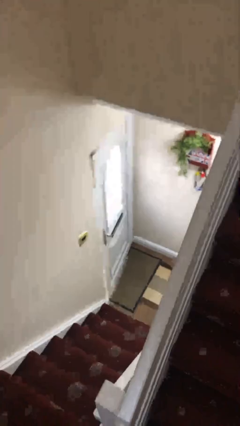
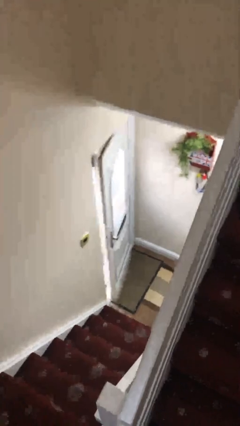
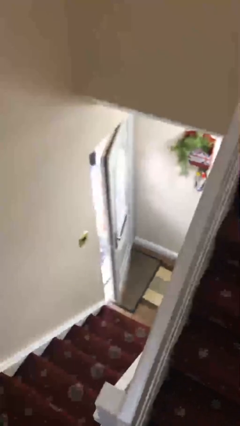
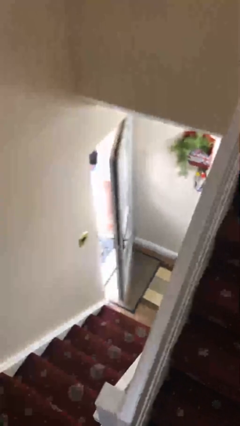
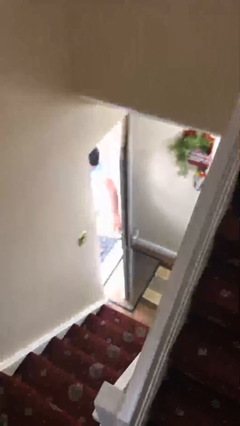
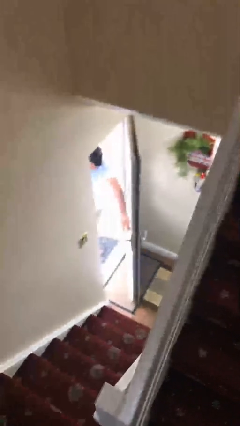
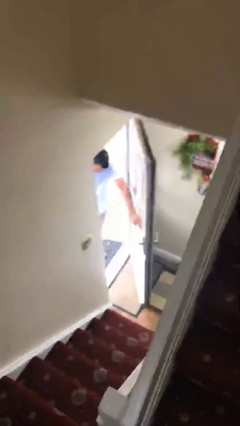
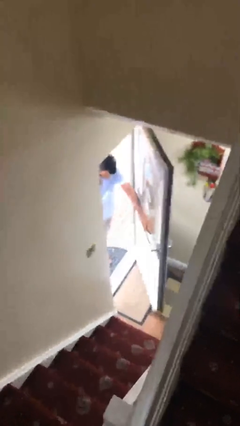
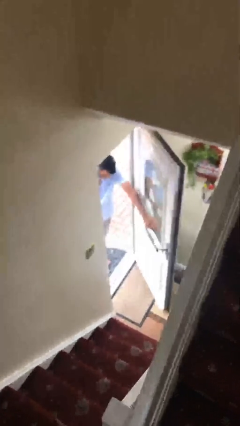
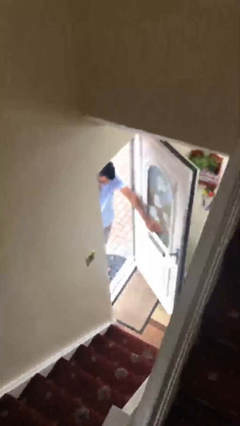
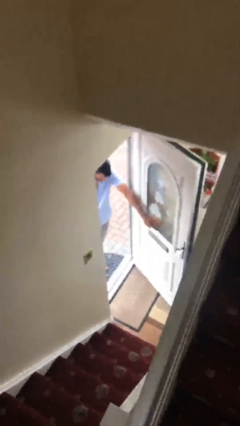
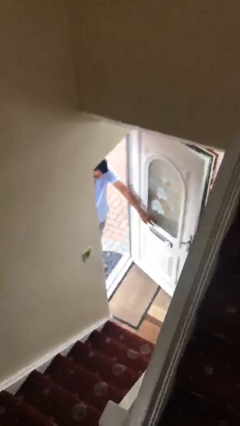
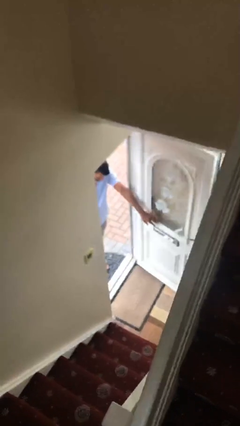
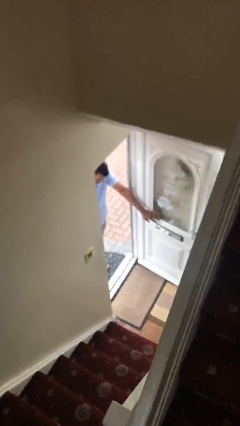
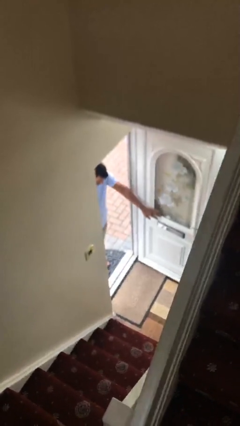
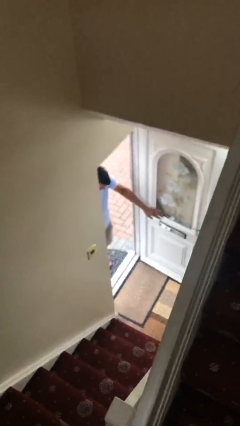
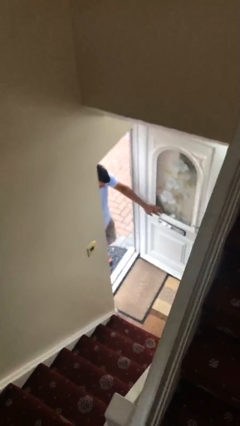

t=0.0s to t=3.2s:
person opens facility door

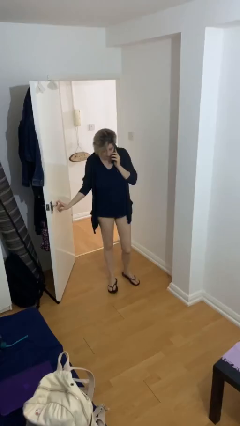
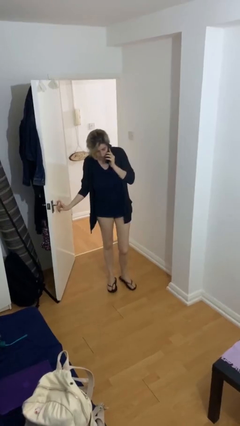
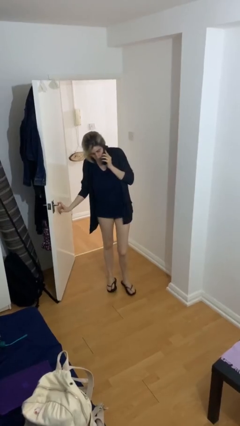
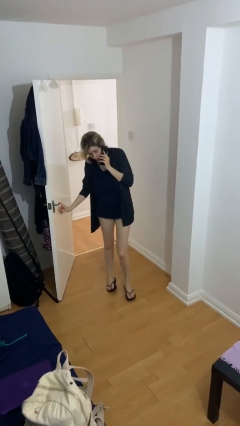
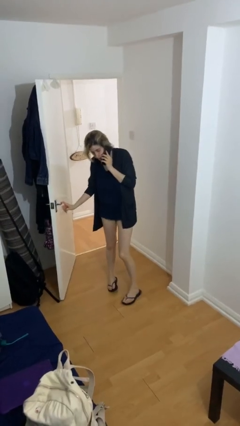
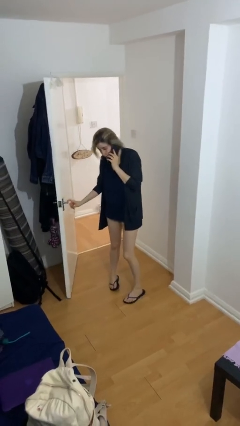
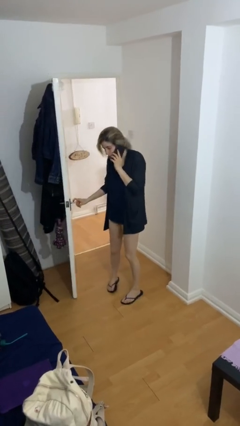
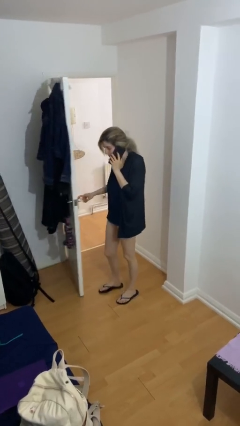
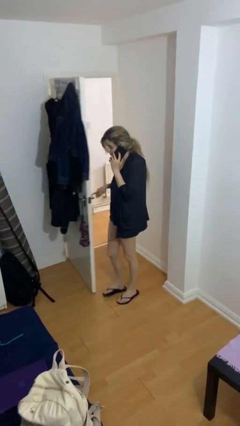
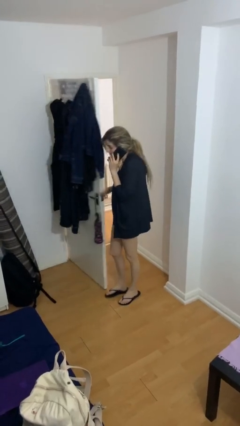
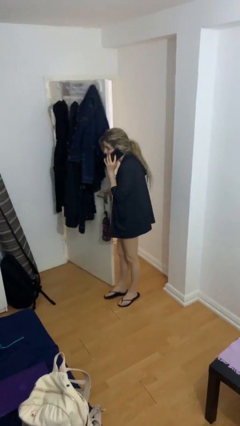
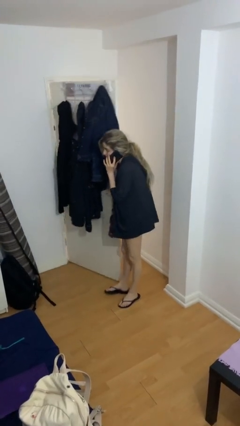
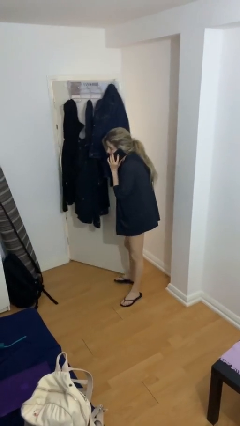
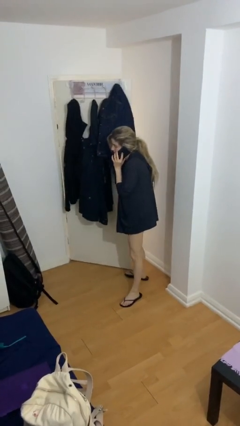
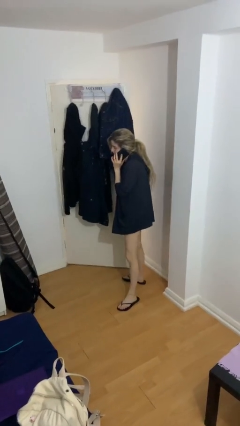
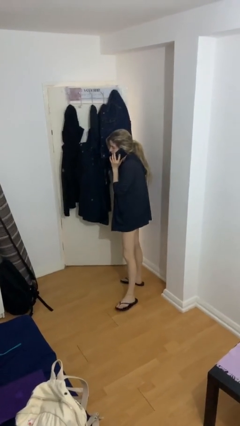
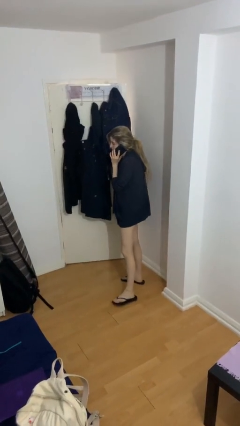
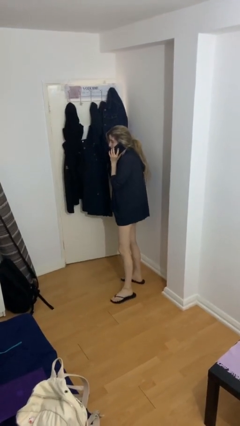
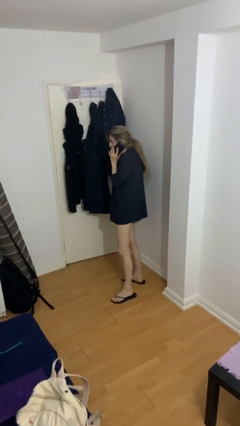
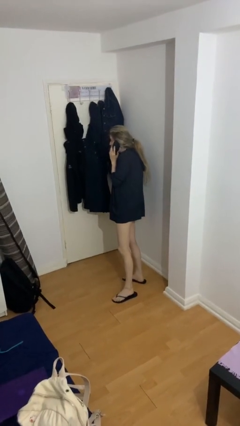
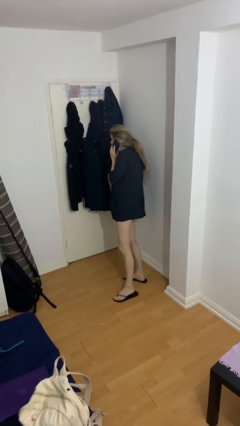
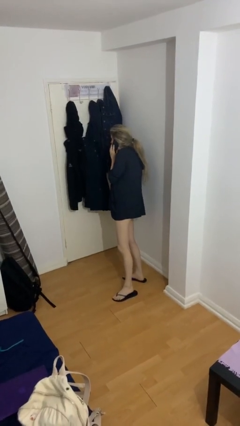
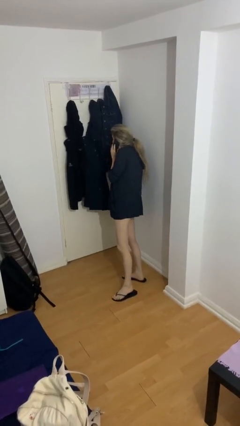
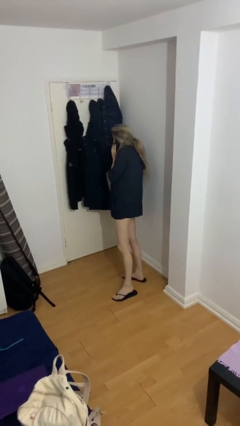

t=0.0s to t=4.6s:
person closes facility door

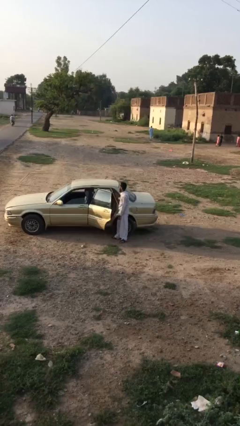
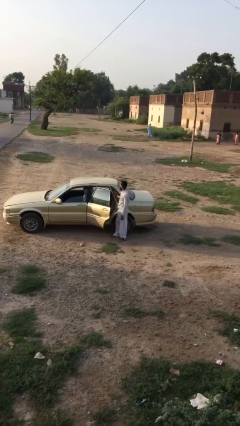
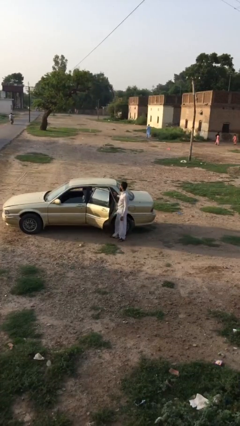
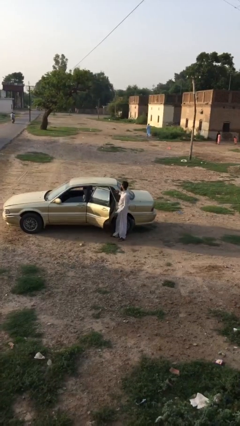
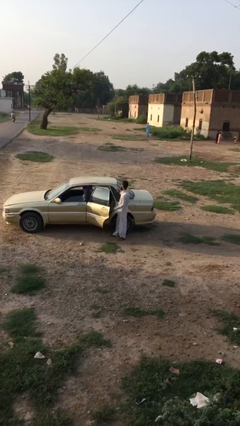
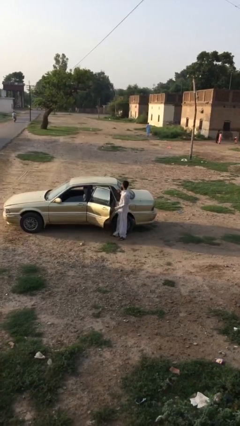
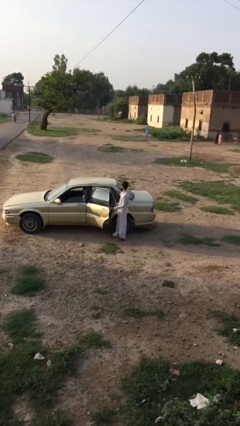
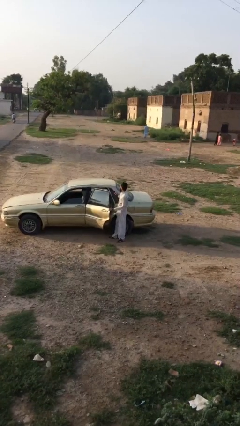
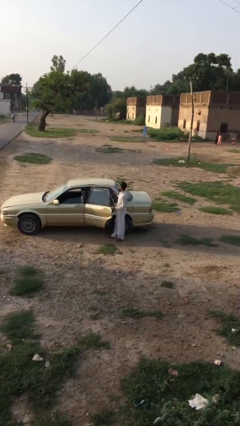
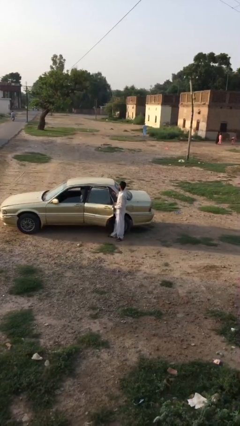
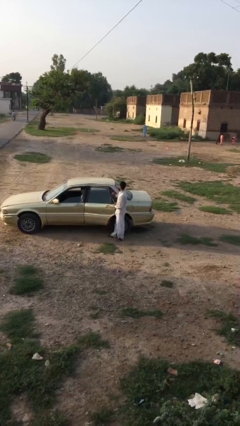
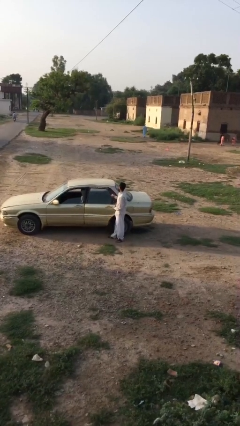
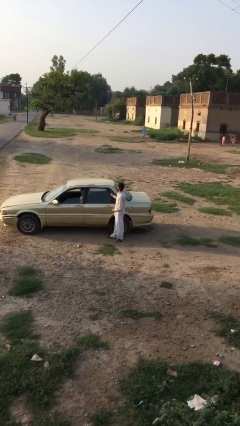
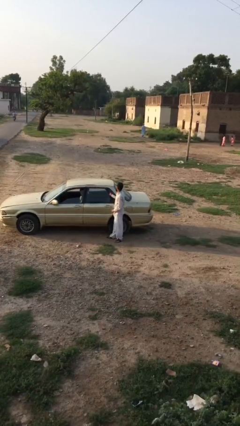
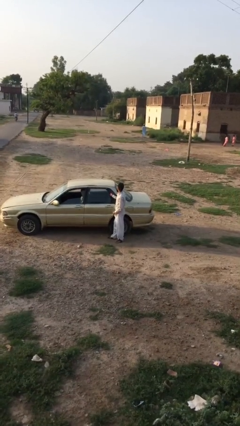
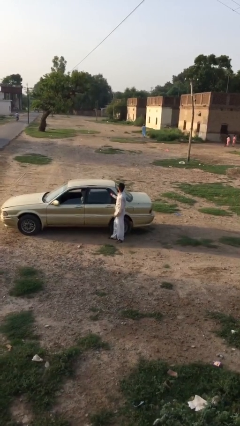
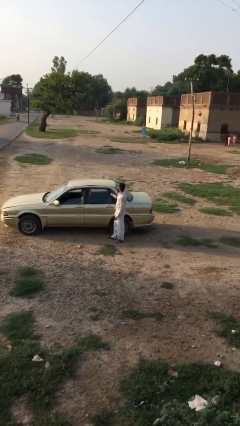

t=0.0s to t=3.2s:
person closes car door

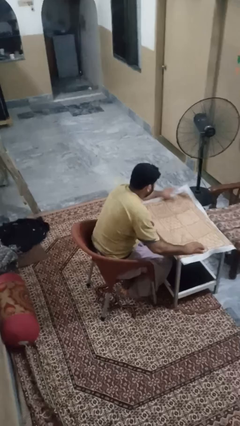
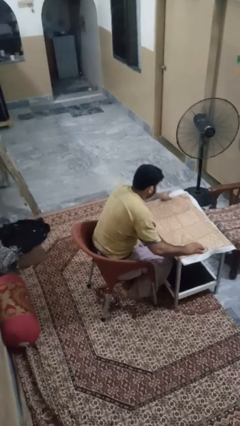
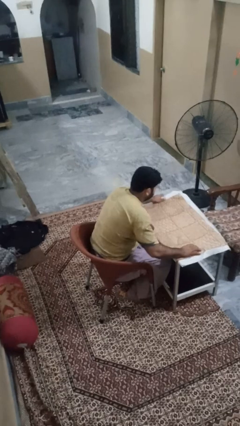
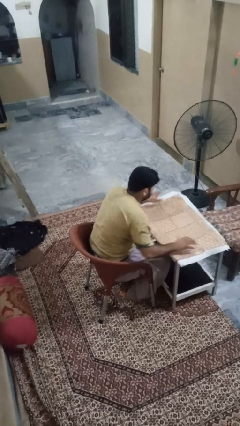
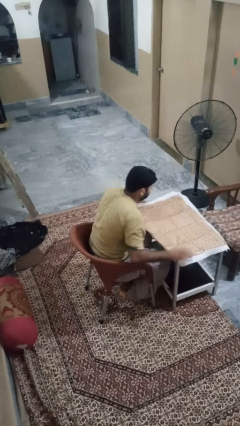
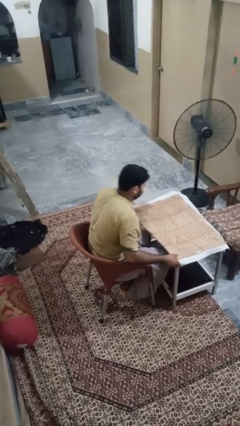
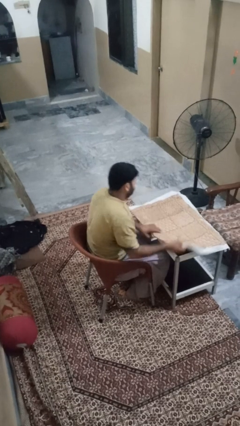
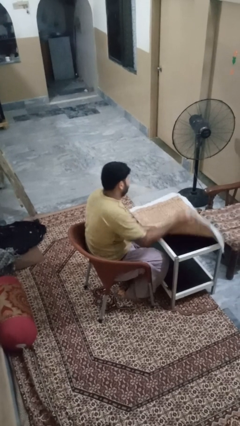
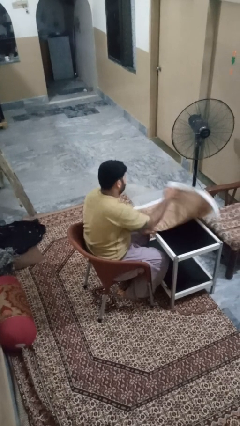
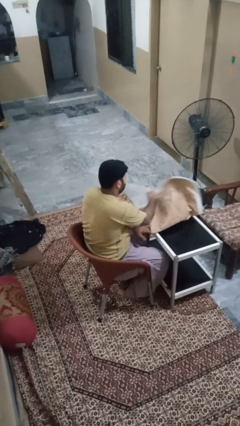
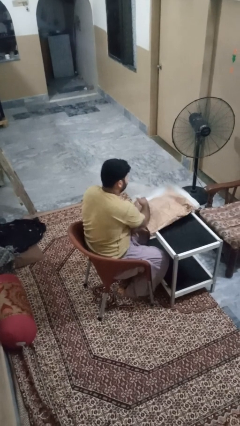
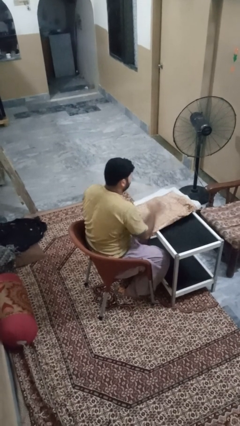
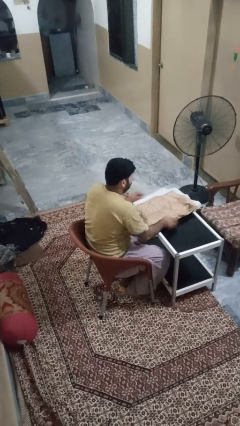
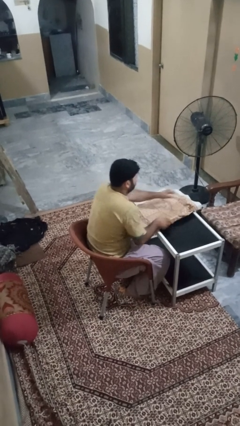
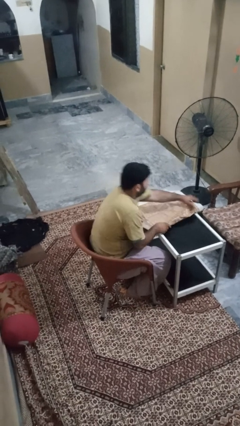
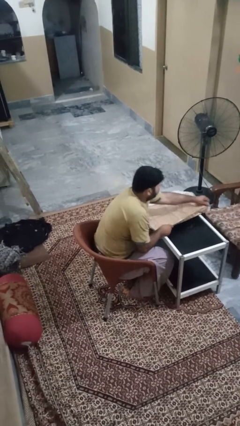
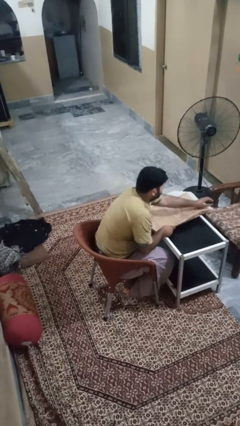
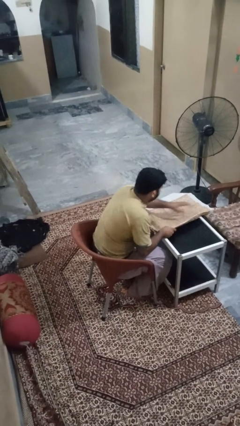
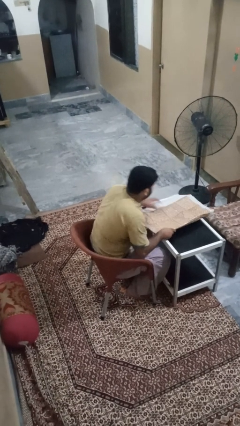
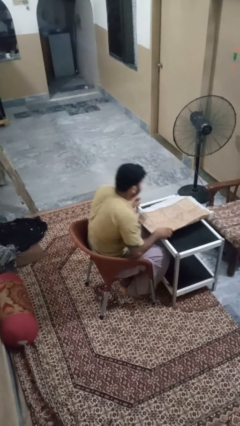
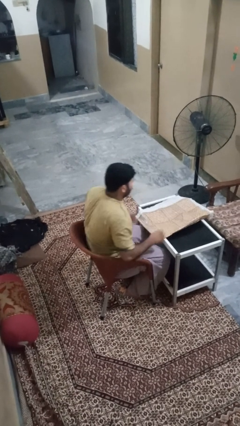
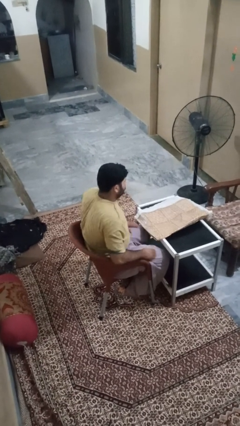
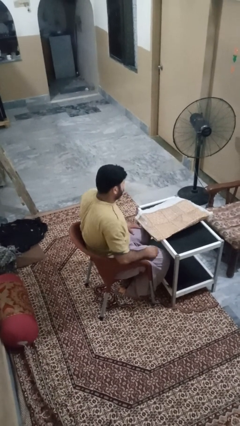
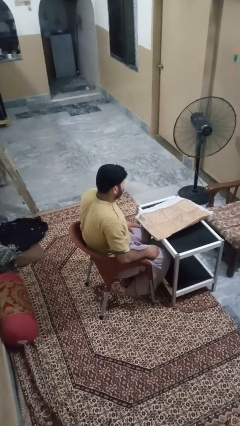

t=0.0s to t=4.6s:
person folds tablecloth

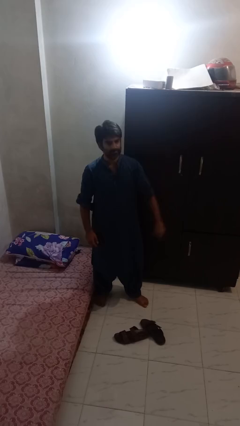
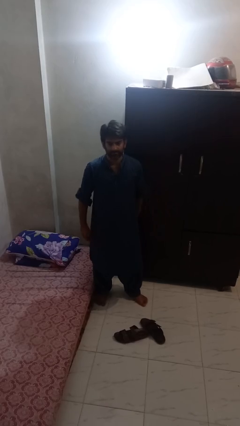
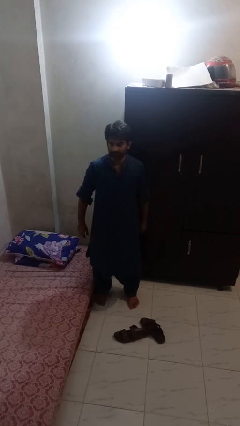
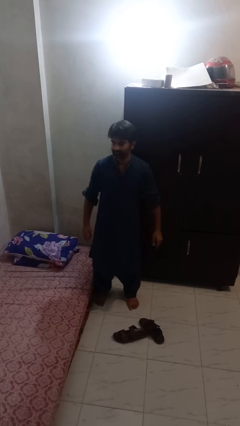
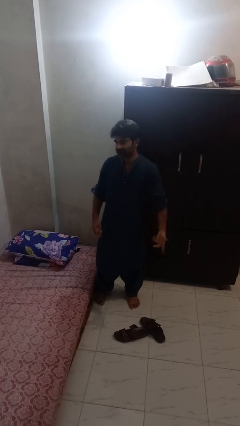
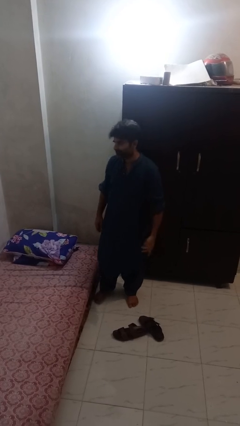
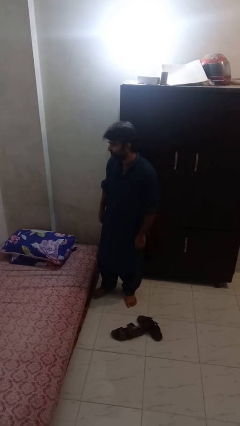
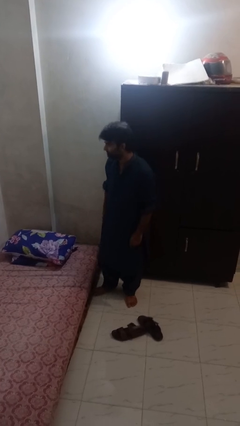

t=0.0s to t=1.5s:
person gestures lower hand

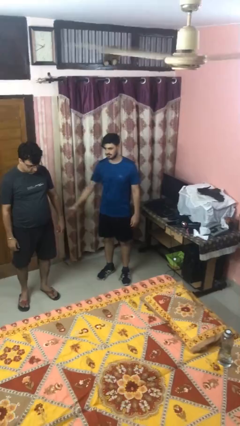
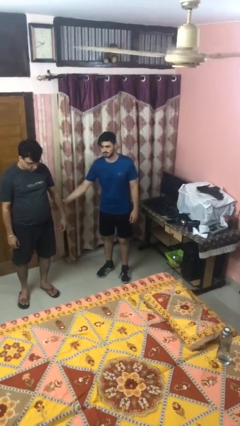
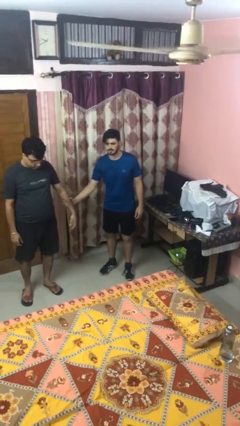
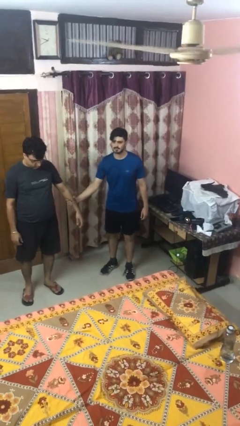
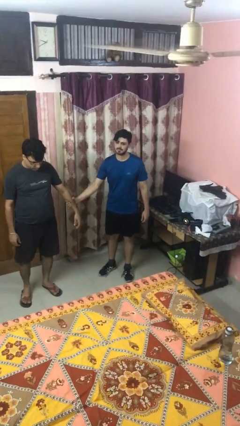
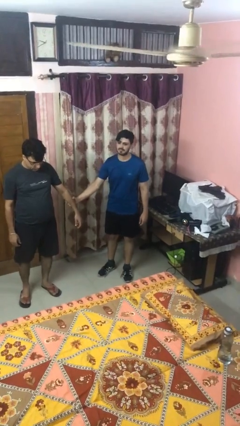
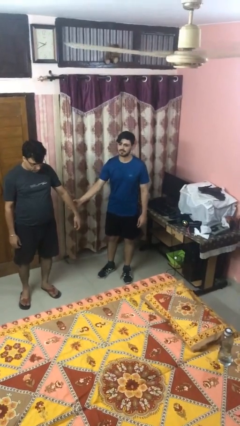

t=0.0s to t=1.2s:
person grabs person by forearm
